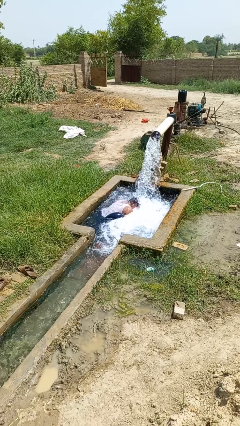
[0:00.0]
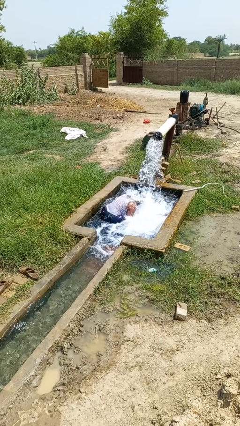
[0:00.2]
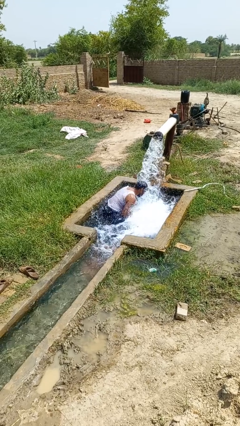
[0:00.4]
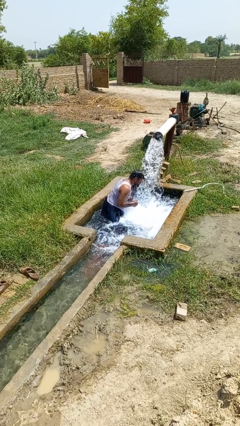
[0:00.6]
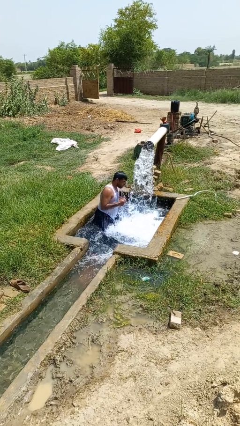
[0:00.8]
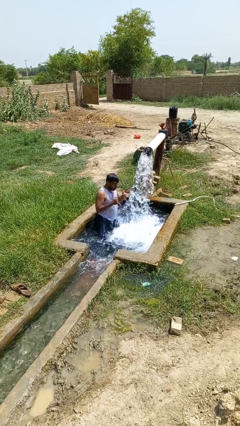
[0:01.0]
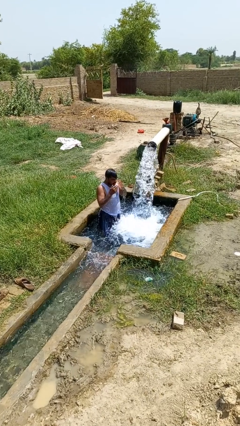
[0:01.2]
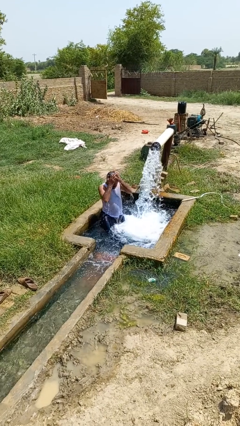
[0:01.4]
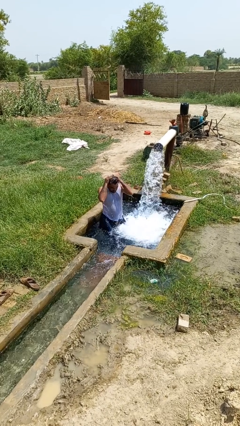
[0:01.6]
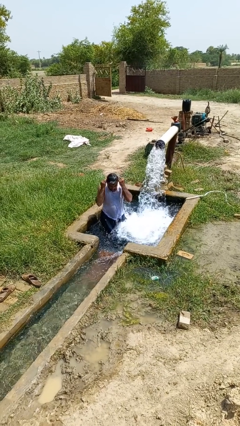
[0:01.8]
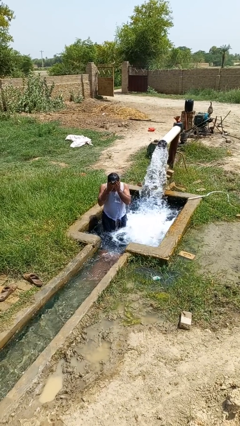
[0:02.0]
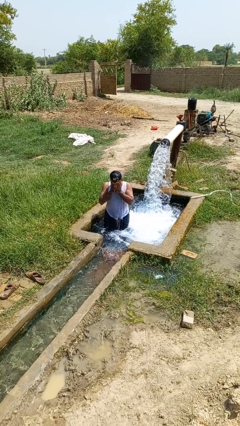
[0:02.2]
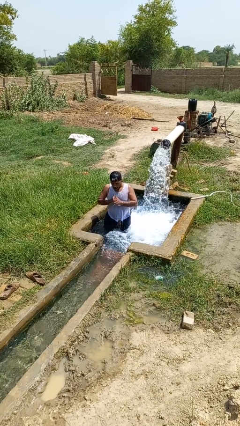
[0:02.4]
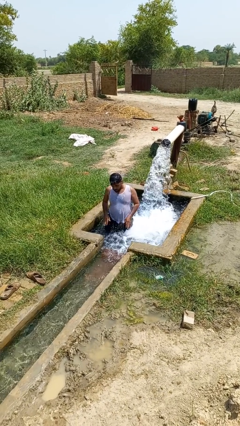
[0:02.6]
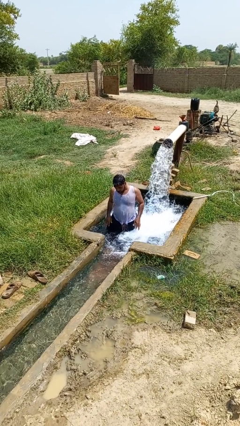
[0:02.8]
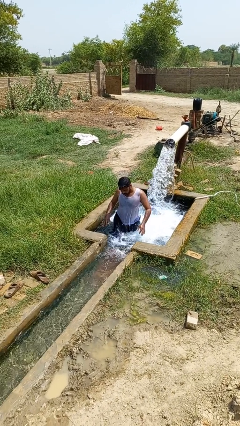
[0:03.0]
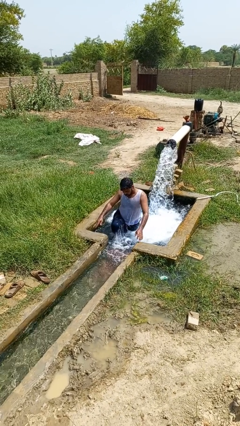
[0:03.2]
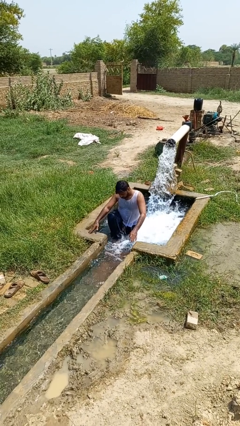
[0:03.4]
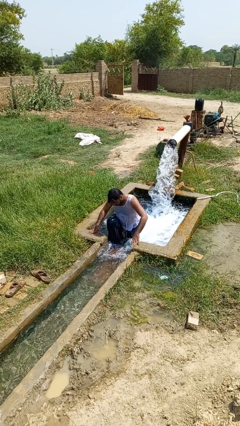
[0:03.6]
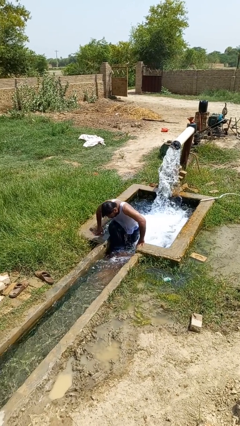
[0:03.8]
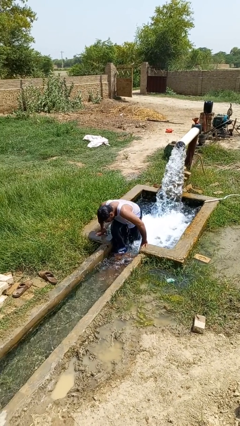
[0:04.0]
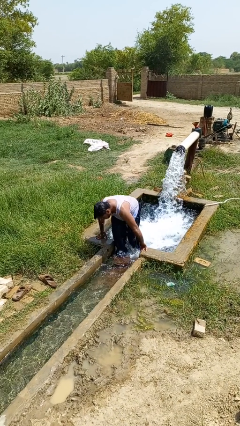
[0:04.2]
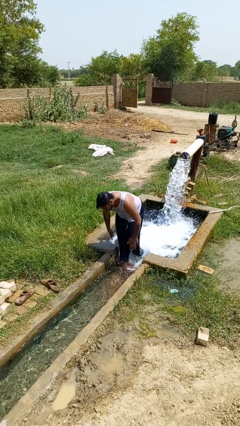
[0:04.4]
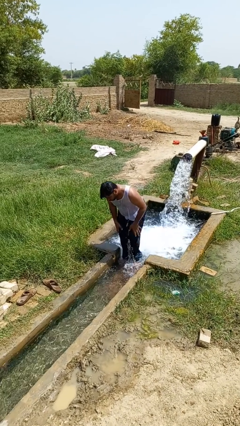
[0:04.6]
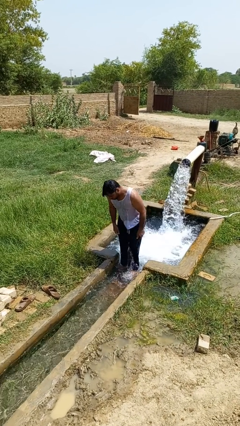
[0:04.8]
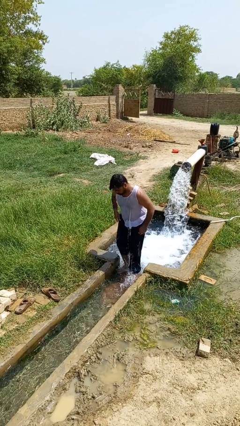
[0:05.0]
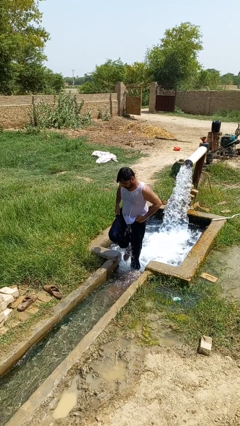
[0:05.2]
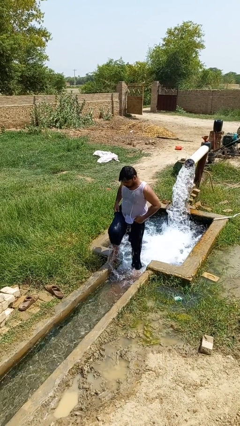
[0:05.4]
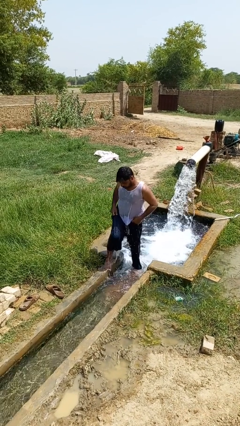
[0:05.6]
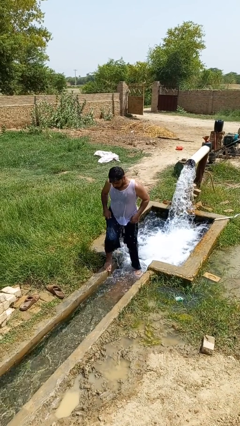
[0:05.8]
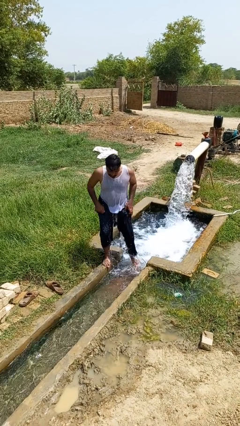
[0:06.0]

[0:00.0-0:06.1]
person exits pool

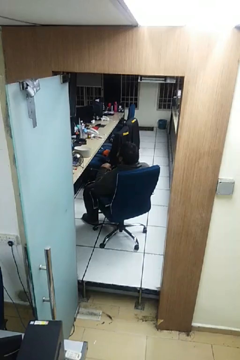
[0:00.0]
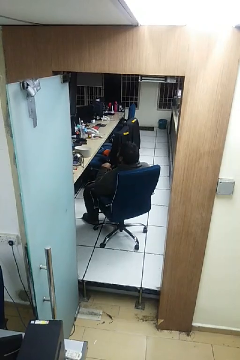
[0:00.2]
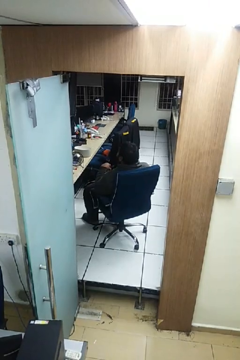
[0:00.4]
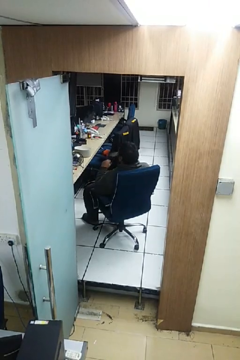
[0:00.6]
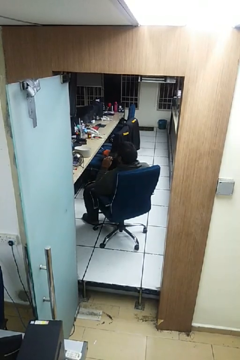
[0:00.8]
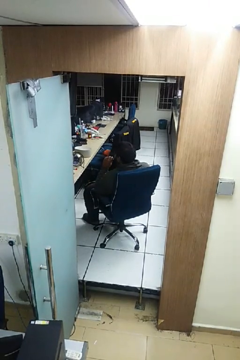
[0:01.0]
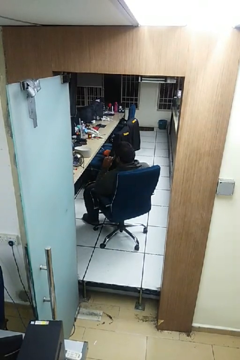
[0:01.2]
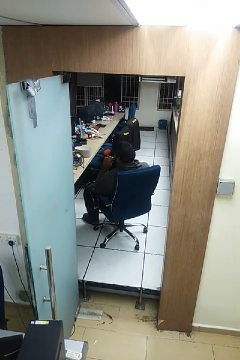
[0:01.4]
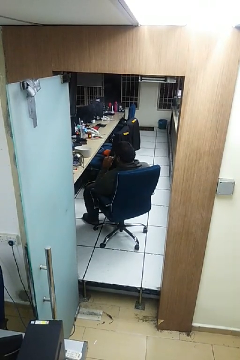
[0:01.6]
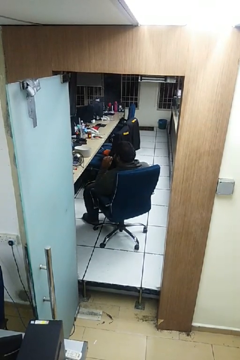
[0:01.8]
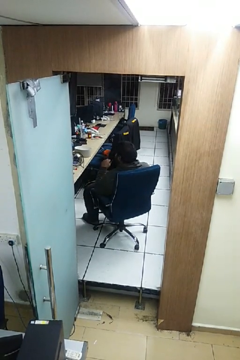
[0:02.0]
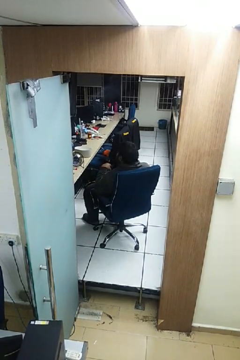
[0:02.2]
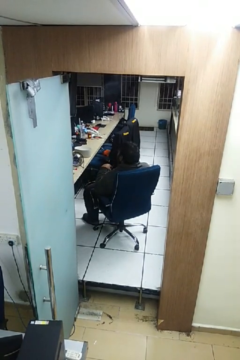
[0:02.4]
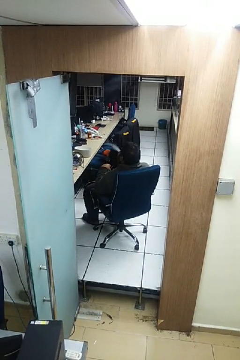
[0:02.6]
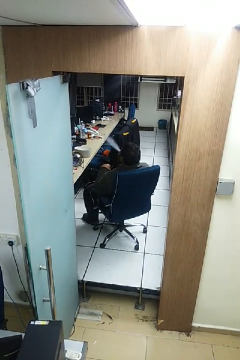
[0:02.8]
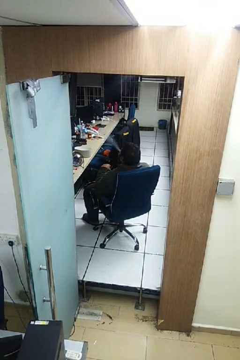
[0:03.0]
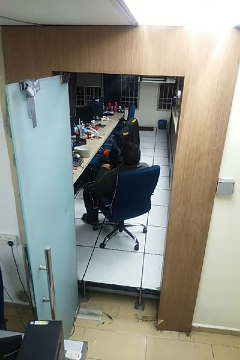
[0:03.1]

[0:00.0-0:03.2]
person vapes

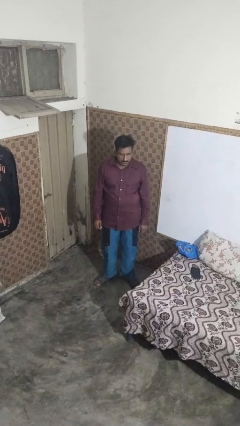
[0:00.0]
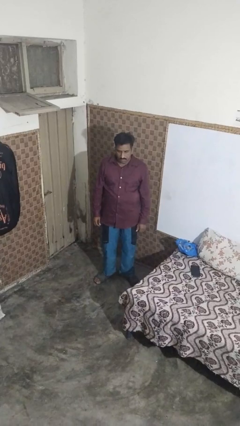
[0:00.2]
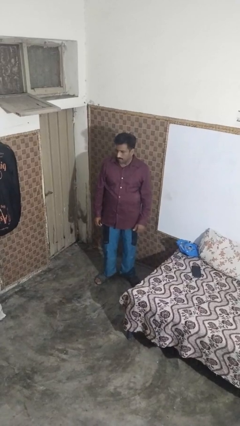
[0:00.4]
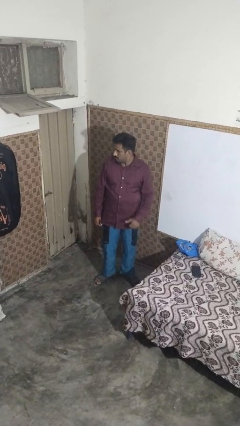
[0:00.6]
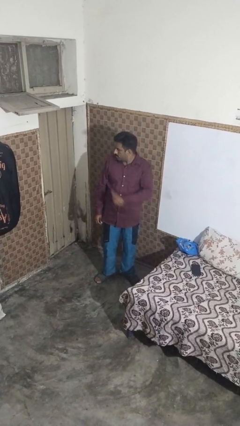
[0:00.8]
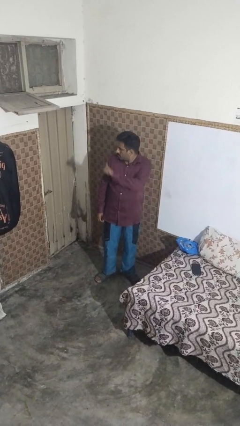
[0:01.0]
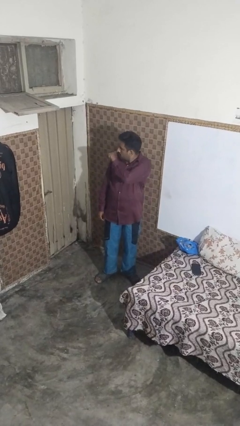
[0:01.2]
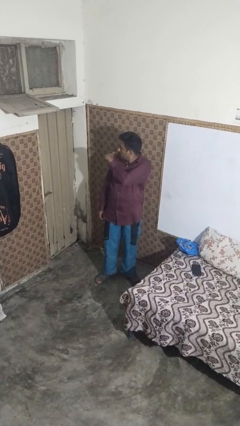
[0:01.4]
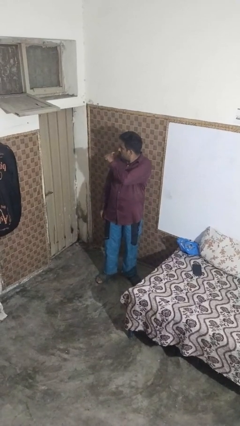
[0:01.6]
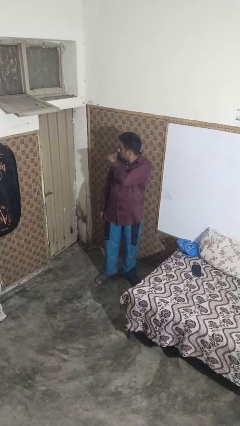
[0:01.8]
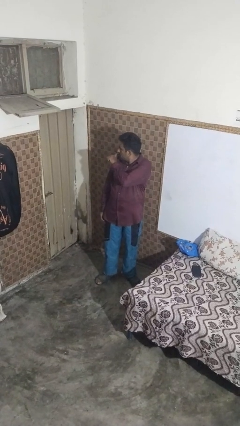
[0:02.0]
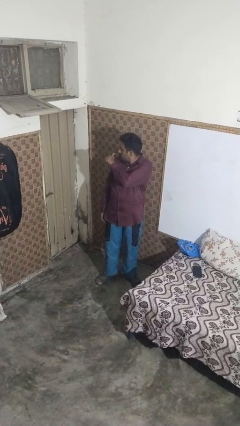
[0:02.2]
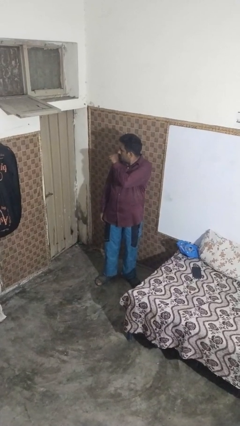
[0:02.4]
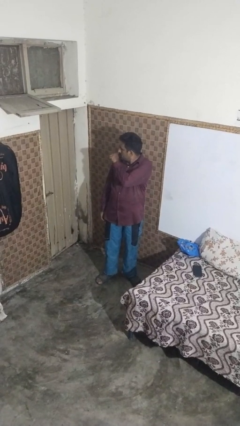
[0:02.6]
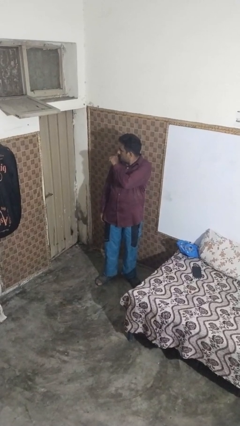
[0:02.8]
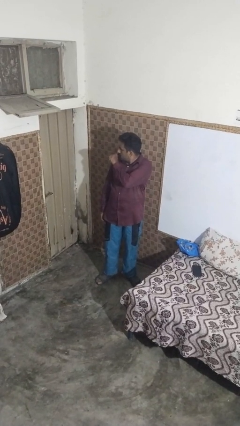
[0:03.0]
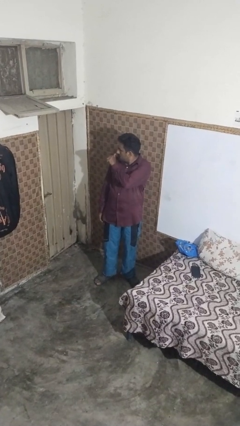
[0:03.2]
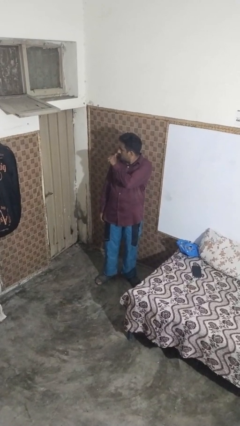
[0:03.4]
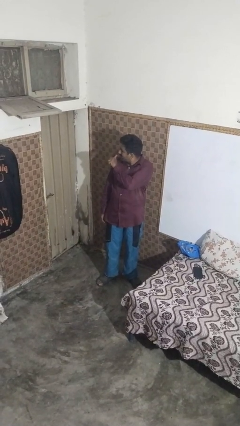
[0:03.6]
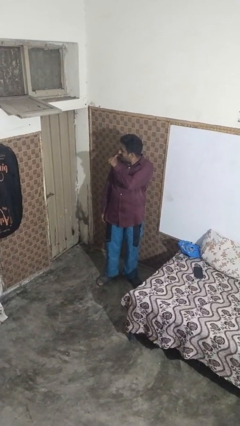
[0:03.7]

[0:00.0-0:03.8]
person gestures behind me

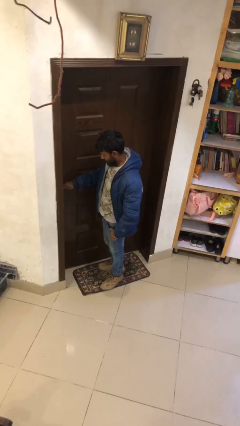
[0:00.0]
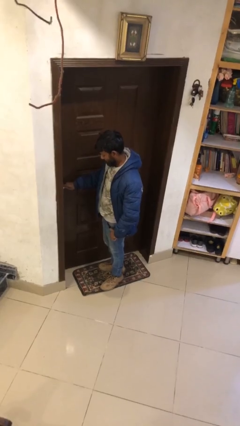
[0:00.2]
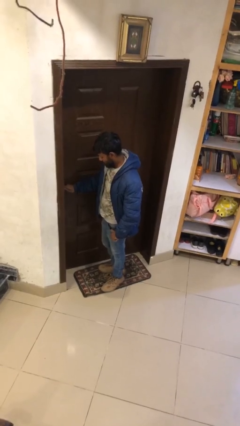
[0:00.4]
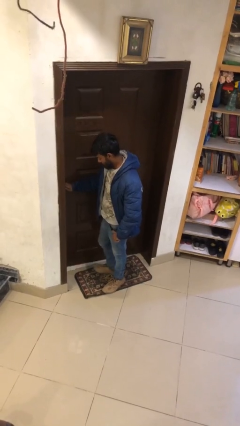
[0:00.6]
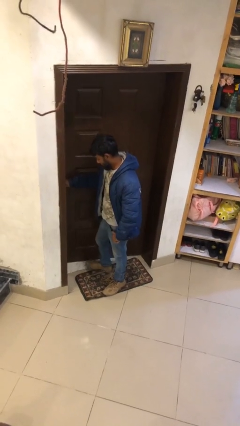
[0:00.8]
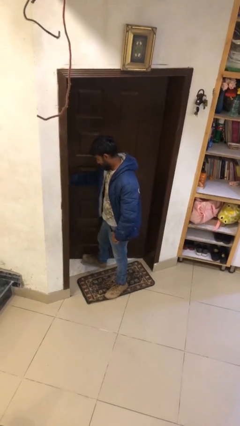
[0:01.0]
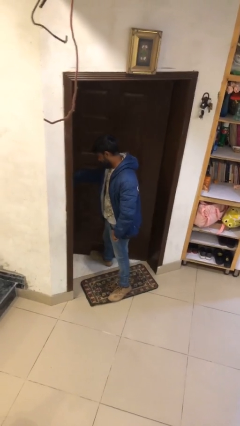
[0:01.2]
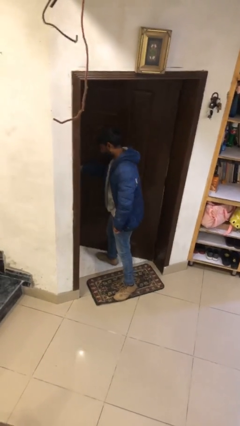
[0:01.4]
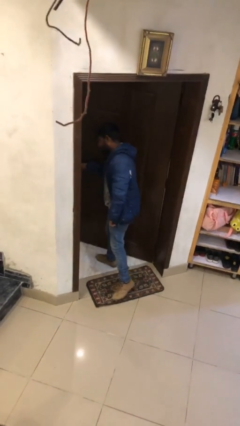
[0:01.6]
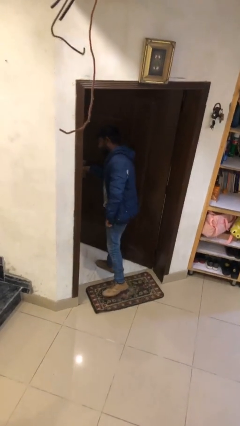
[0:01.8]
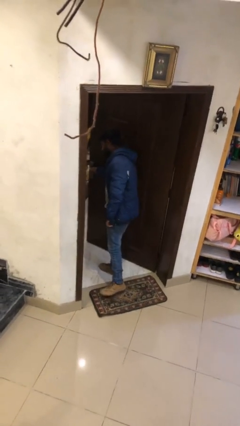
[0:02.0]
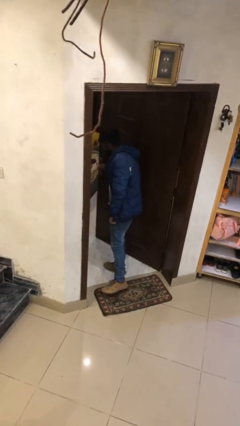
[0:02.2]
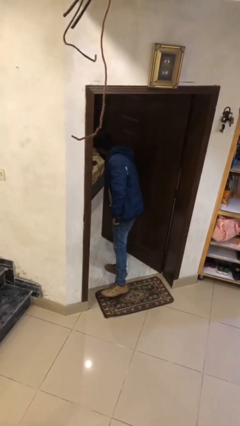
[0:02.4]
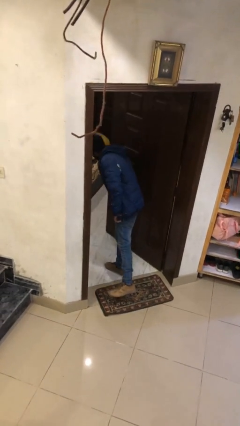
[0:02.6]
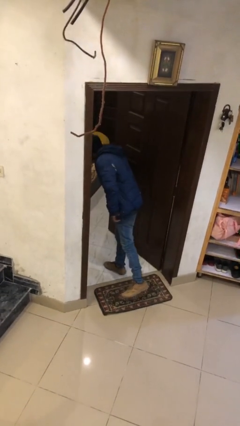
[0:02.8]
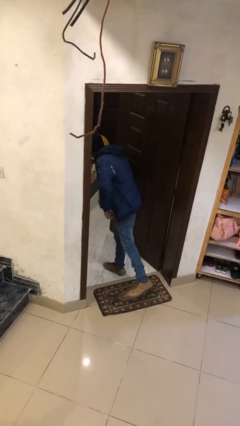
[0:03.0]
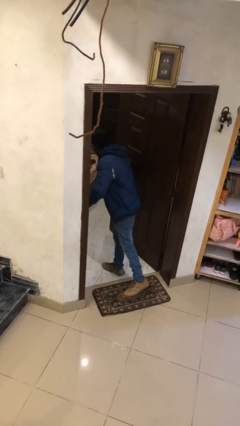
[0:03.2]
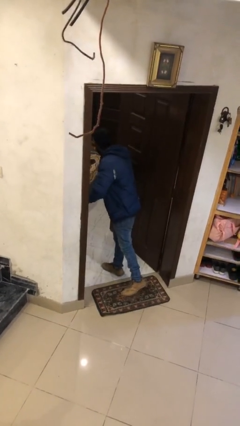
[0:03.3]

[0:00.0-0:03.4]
person opens facility door

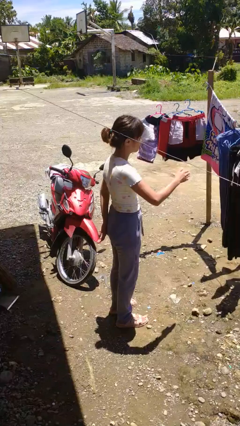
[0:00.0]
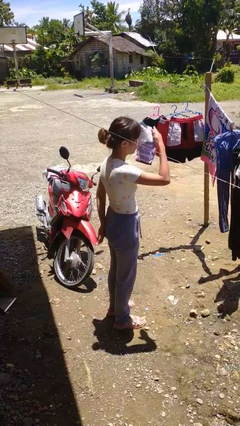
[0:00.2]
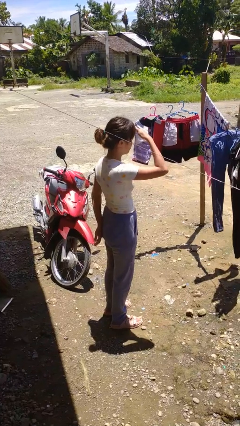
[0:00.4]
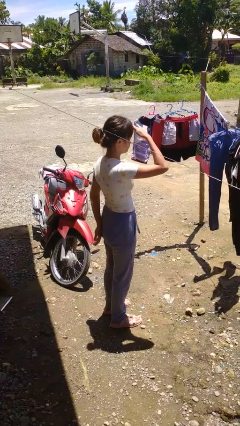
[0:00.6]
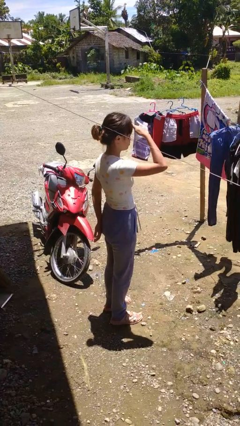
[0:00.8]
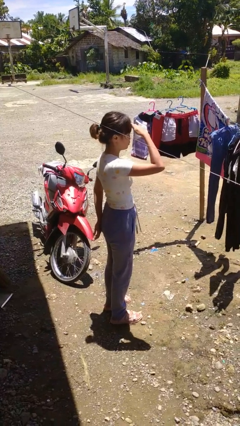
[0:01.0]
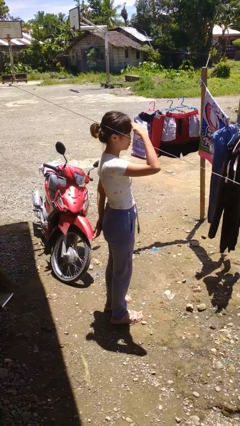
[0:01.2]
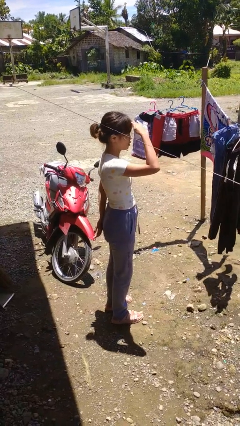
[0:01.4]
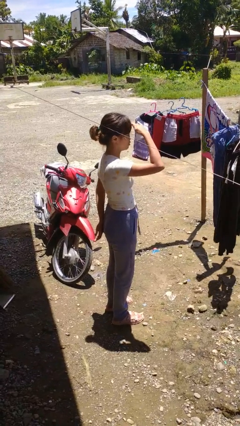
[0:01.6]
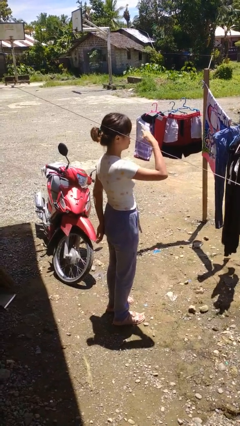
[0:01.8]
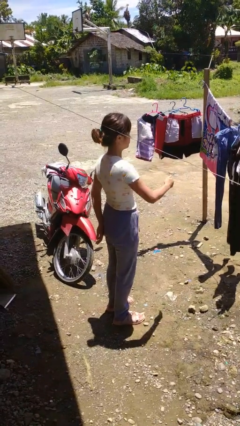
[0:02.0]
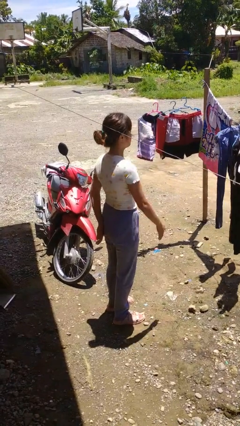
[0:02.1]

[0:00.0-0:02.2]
person shades eyes
